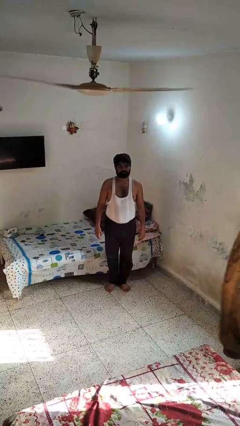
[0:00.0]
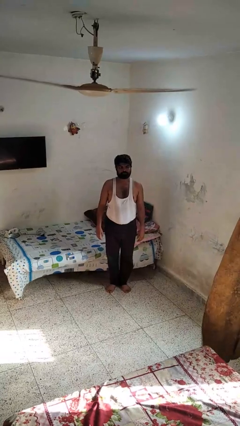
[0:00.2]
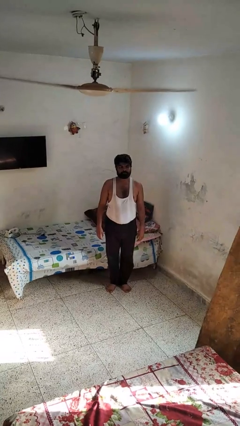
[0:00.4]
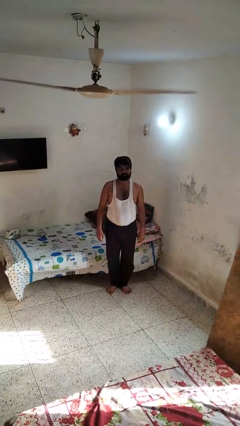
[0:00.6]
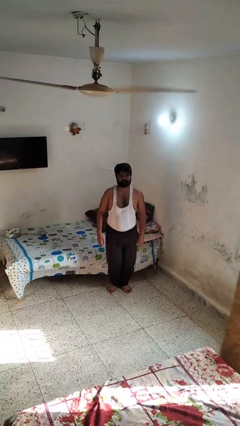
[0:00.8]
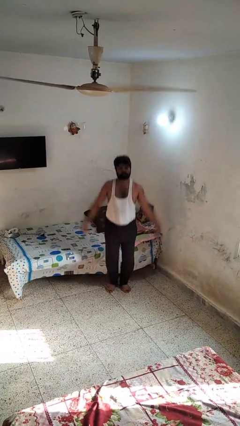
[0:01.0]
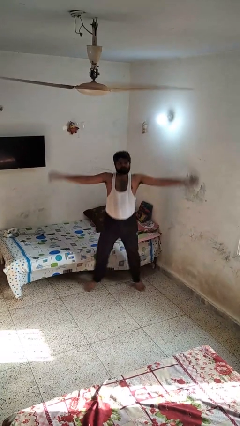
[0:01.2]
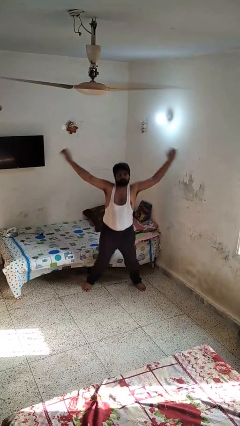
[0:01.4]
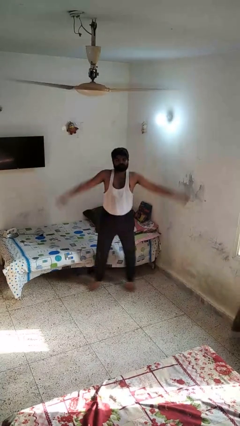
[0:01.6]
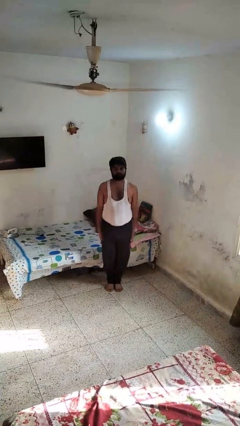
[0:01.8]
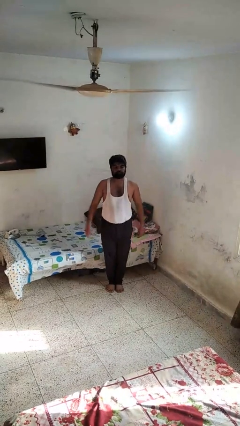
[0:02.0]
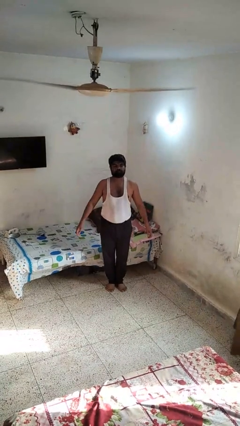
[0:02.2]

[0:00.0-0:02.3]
person exercises with jumping jacks

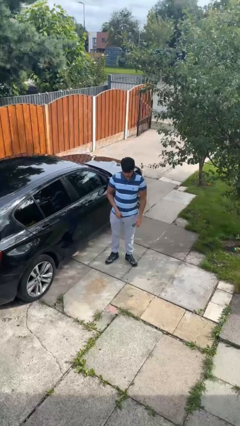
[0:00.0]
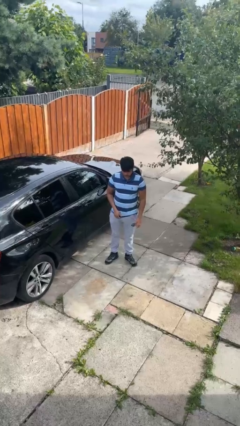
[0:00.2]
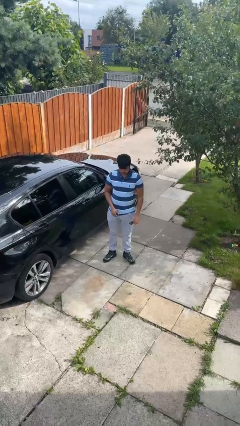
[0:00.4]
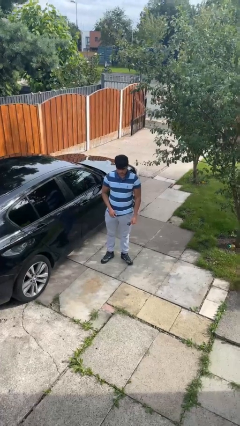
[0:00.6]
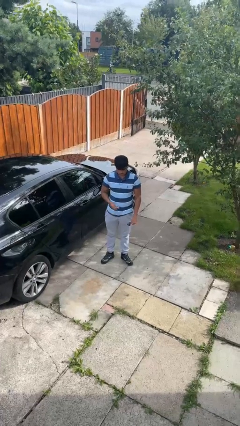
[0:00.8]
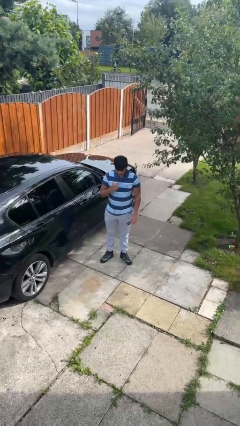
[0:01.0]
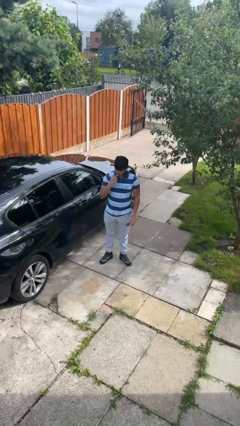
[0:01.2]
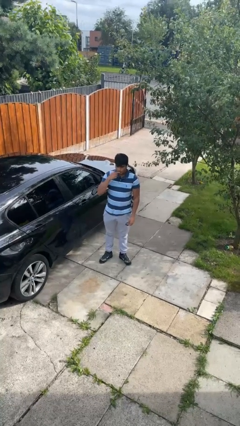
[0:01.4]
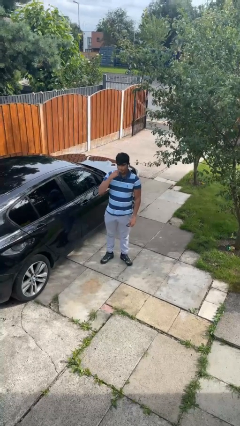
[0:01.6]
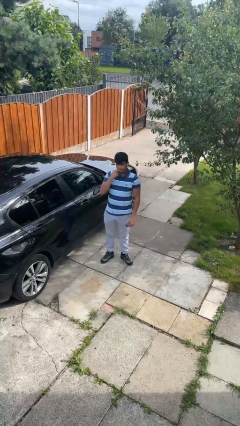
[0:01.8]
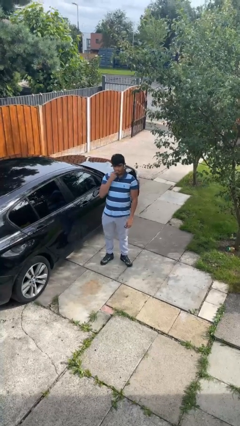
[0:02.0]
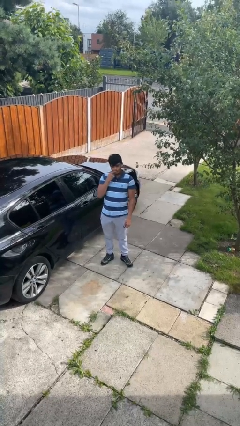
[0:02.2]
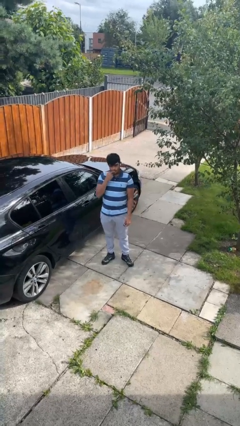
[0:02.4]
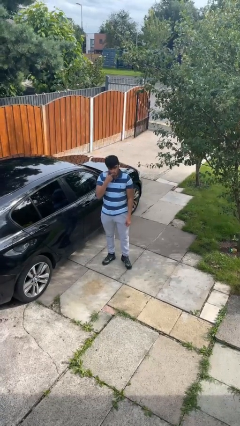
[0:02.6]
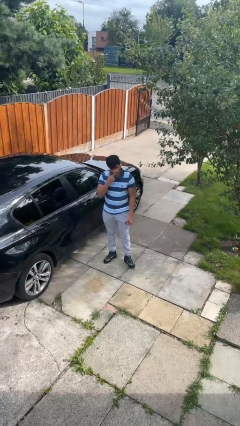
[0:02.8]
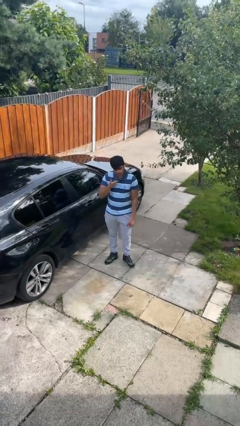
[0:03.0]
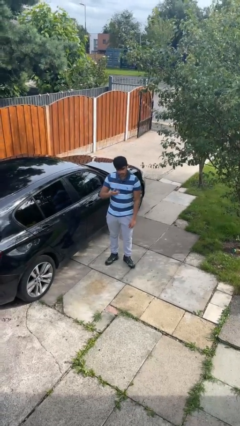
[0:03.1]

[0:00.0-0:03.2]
person licks fingers

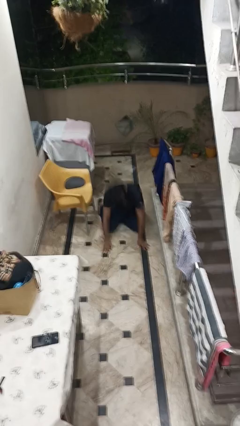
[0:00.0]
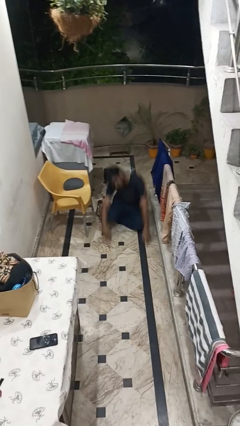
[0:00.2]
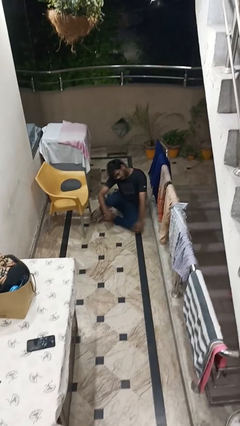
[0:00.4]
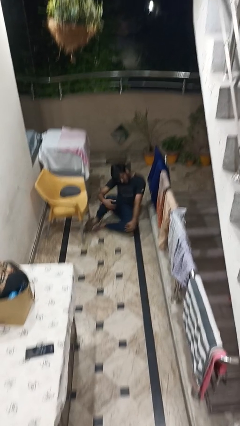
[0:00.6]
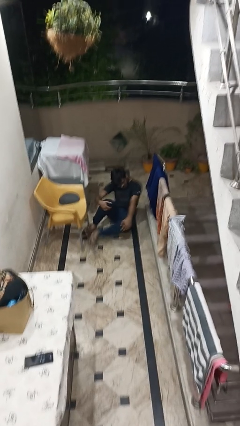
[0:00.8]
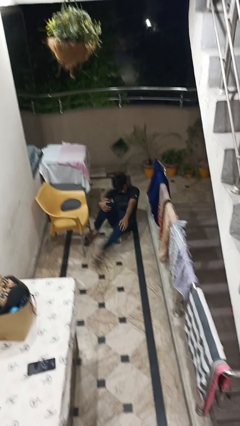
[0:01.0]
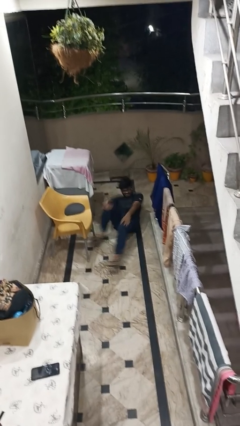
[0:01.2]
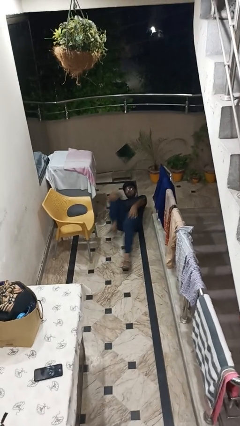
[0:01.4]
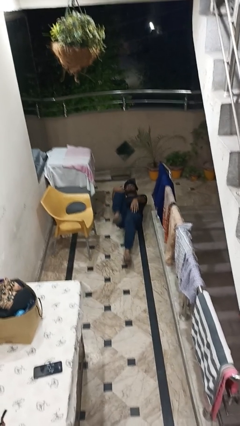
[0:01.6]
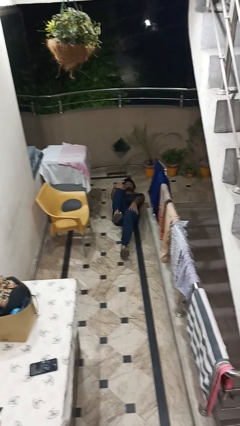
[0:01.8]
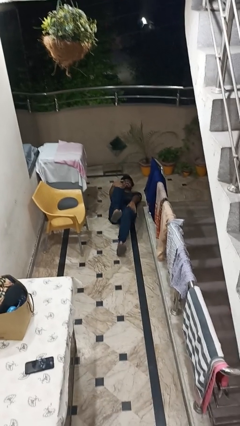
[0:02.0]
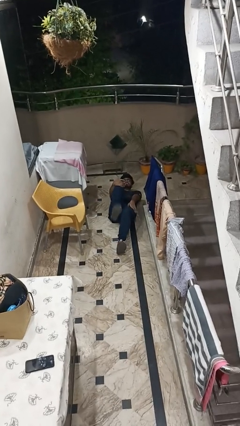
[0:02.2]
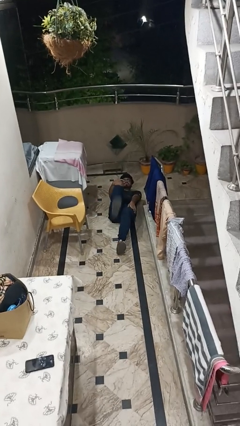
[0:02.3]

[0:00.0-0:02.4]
person lies down on floor

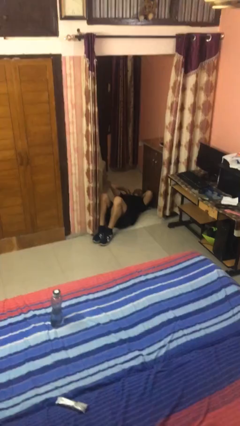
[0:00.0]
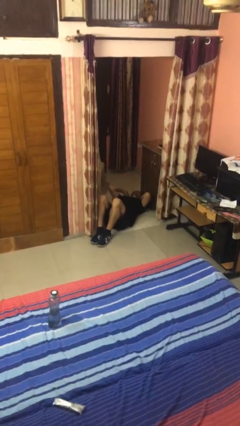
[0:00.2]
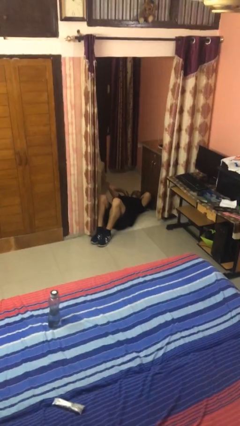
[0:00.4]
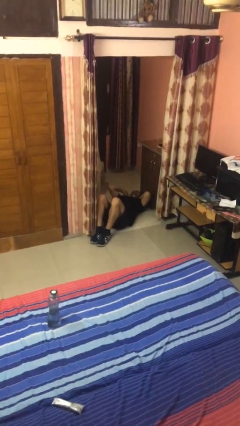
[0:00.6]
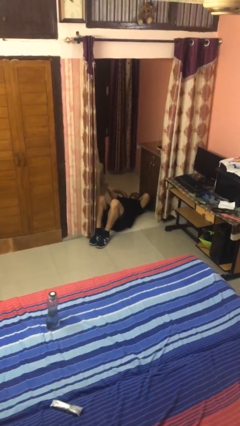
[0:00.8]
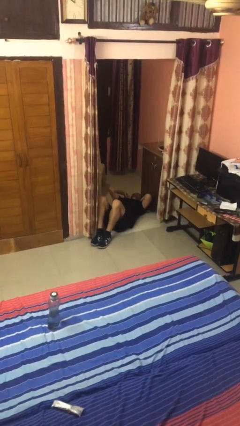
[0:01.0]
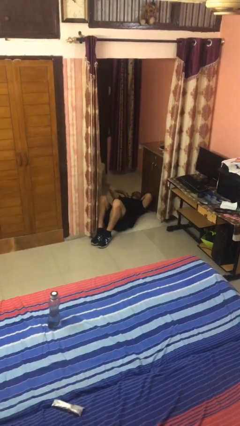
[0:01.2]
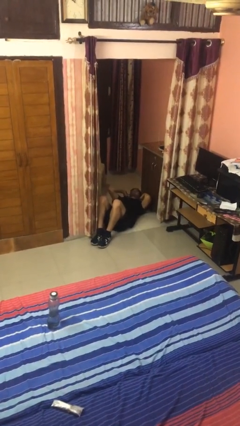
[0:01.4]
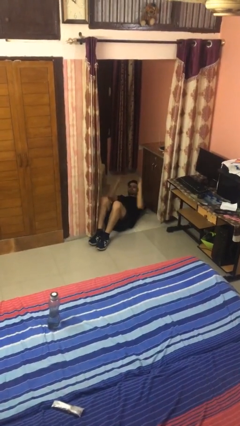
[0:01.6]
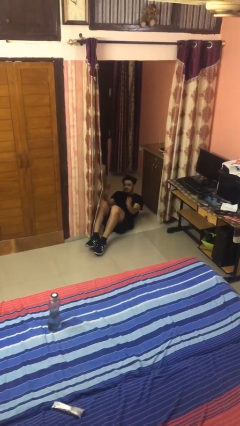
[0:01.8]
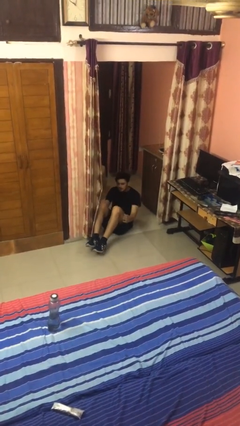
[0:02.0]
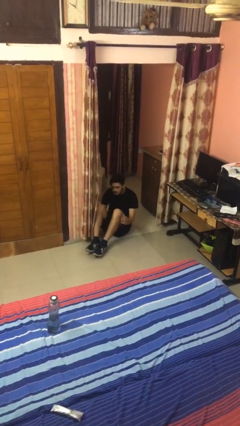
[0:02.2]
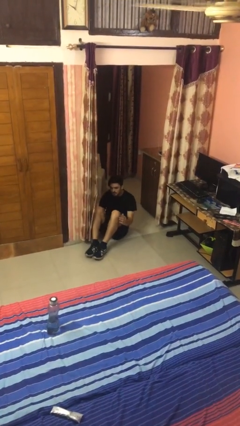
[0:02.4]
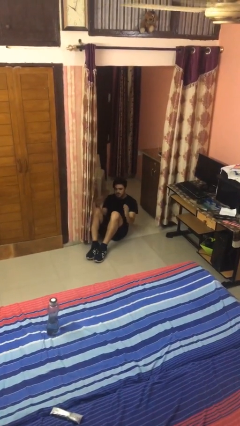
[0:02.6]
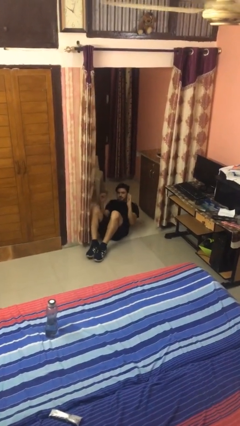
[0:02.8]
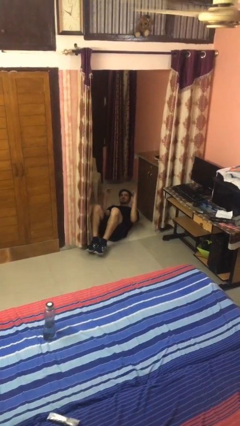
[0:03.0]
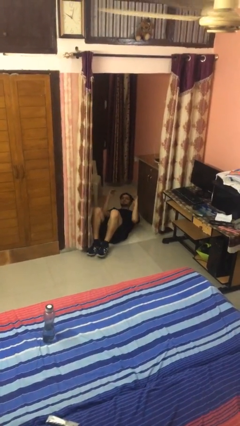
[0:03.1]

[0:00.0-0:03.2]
person exercises with situp

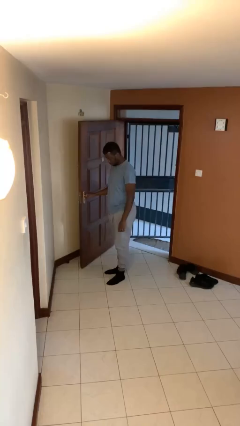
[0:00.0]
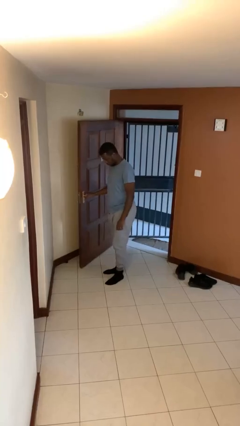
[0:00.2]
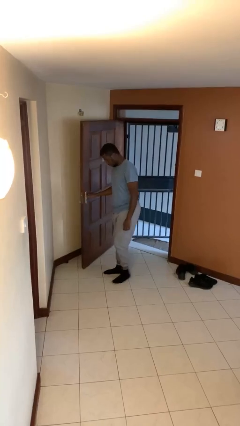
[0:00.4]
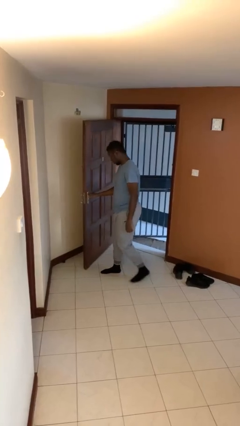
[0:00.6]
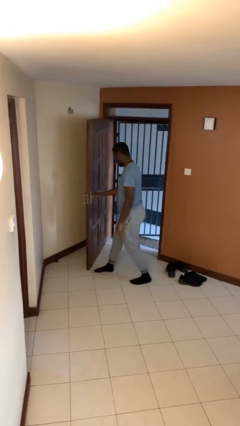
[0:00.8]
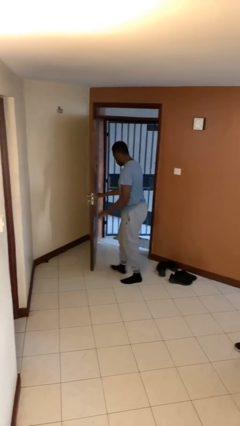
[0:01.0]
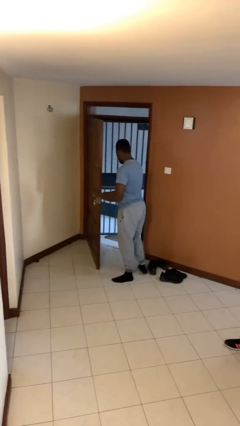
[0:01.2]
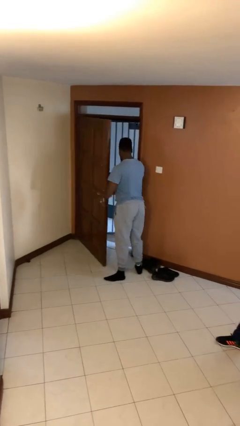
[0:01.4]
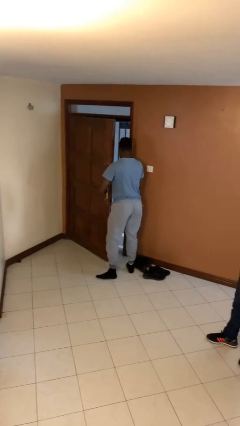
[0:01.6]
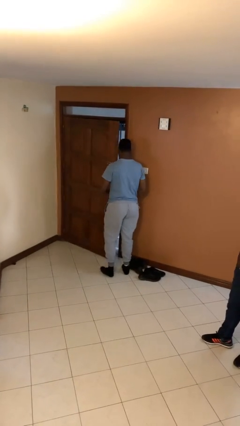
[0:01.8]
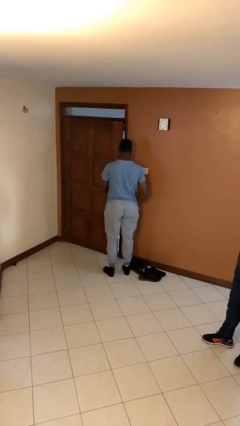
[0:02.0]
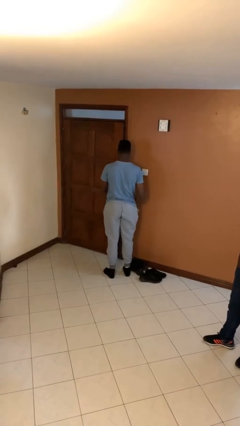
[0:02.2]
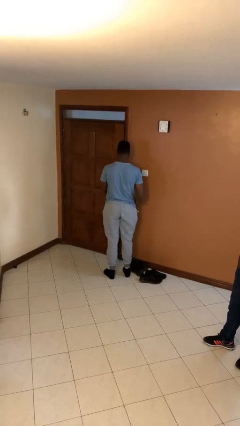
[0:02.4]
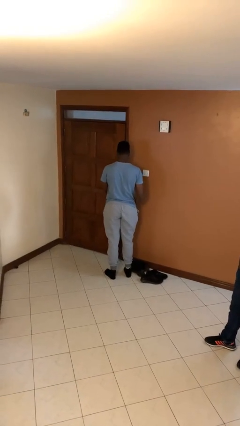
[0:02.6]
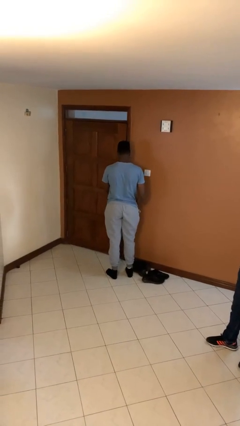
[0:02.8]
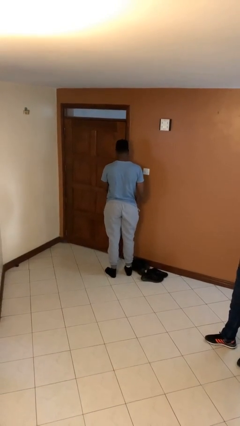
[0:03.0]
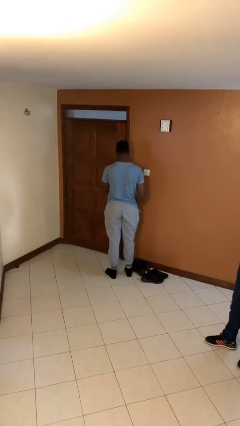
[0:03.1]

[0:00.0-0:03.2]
person closes facility door

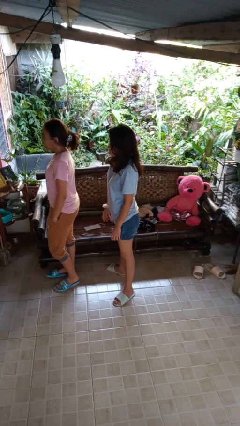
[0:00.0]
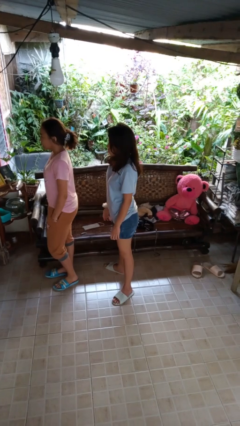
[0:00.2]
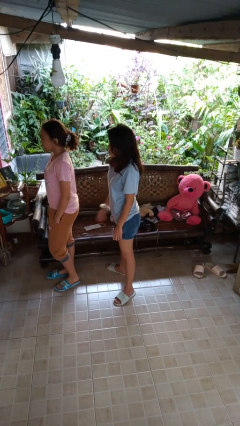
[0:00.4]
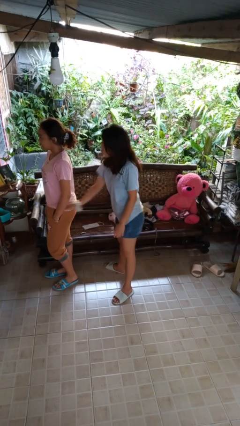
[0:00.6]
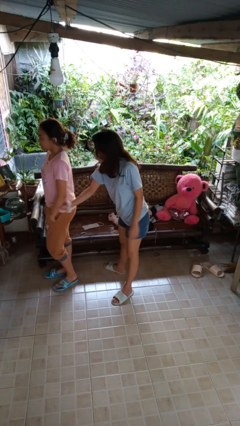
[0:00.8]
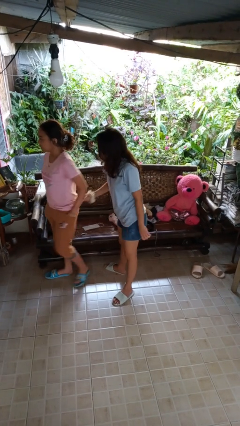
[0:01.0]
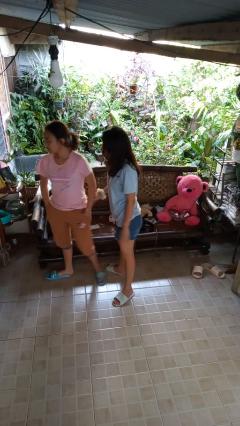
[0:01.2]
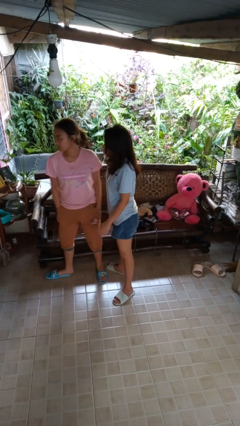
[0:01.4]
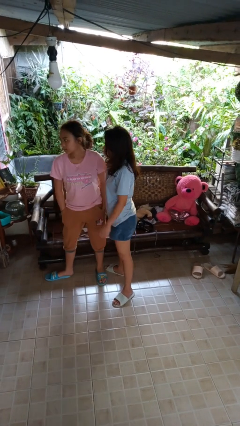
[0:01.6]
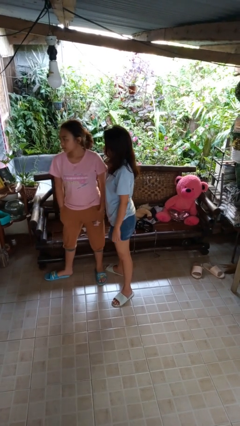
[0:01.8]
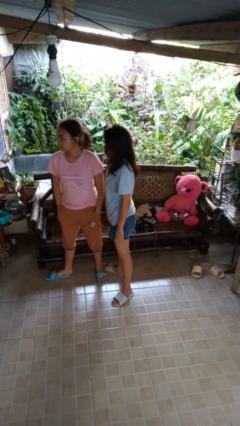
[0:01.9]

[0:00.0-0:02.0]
person grabs person by forearm

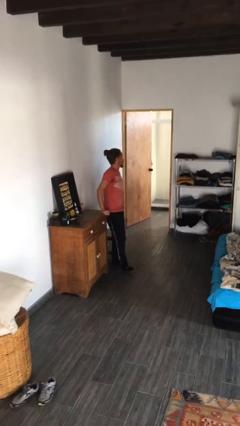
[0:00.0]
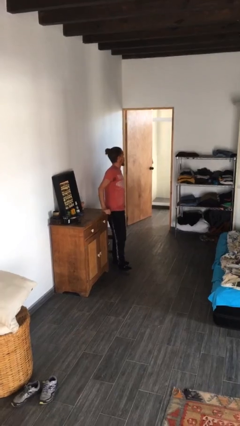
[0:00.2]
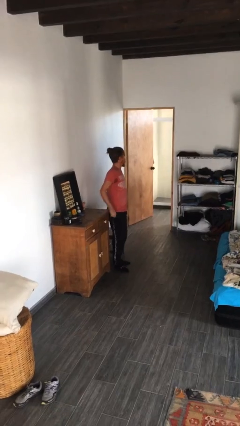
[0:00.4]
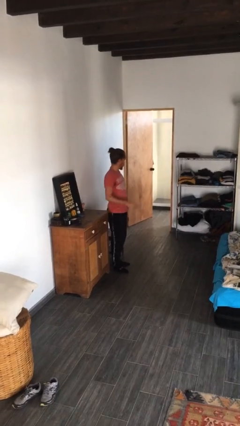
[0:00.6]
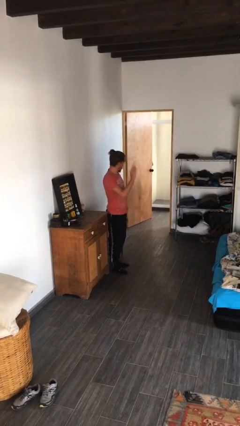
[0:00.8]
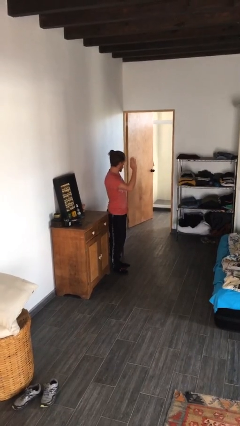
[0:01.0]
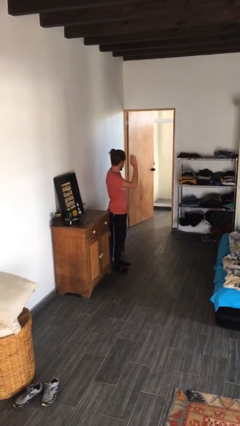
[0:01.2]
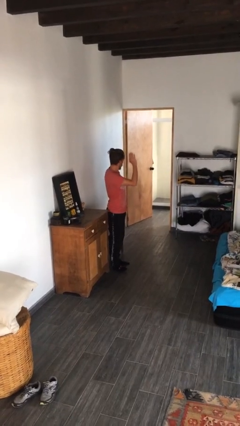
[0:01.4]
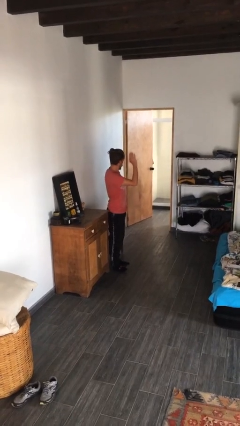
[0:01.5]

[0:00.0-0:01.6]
person gestures raise hand
